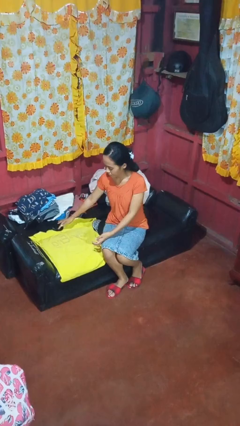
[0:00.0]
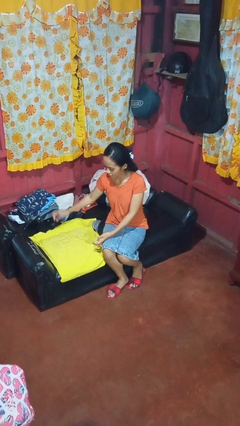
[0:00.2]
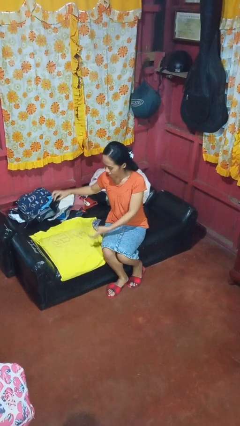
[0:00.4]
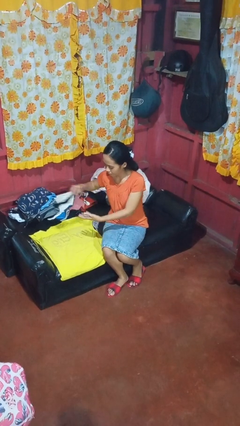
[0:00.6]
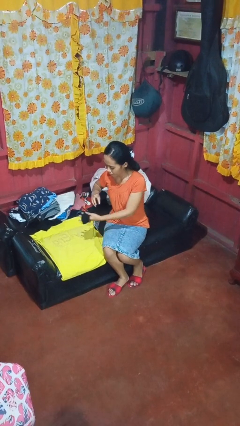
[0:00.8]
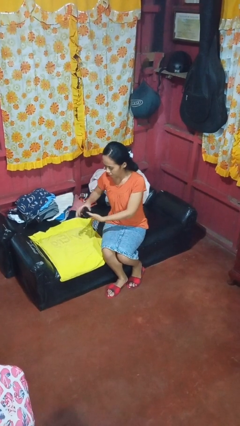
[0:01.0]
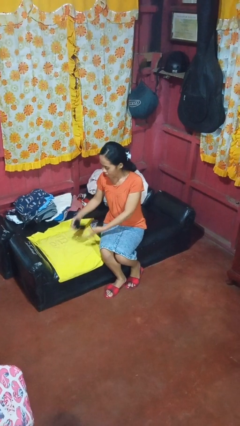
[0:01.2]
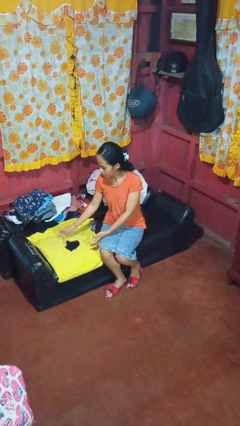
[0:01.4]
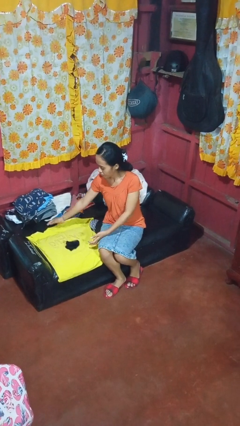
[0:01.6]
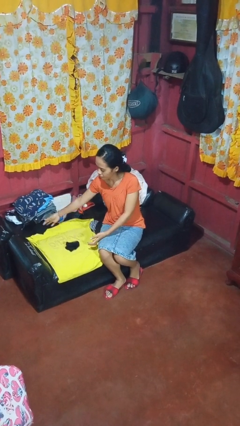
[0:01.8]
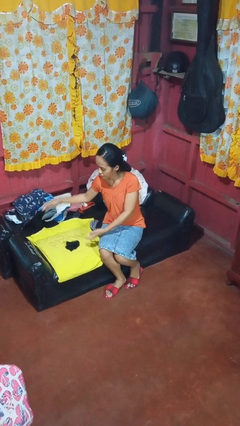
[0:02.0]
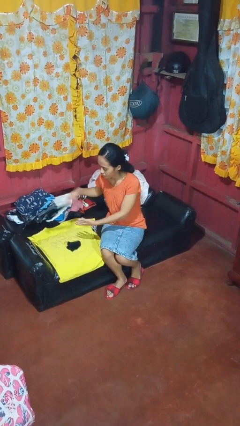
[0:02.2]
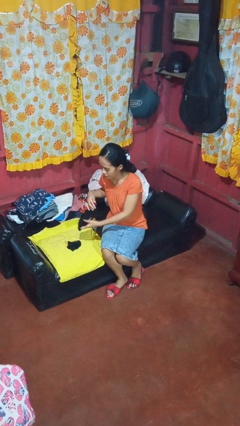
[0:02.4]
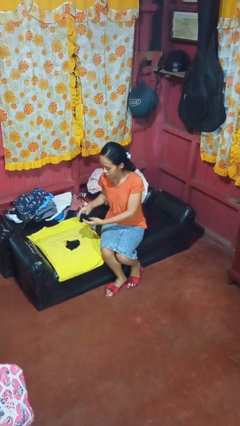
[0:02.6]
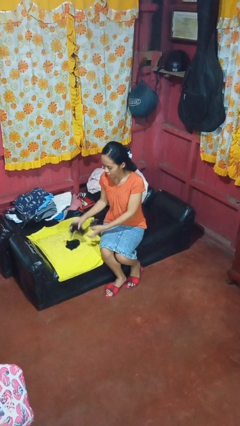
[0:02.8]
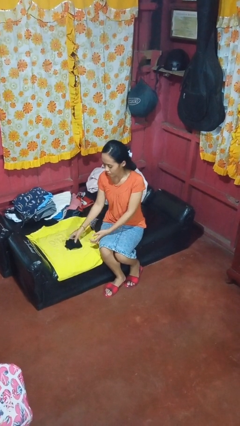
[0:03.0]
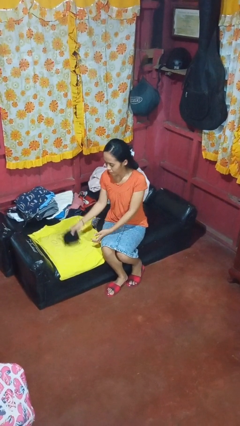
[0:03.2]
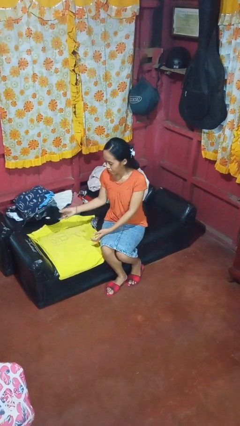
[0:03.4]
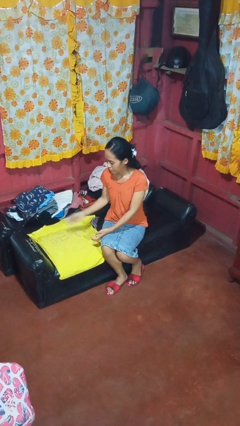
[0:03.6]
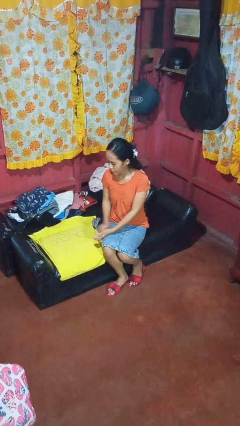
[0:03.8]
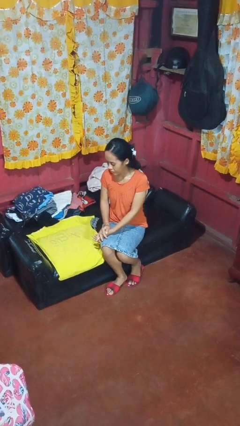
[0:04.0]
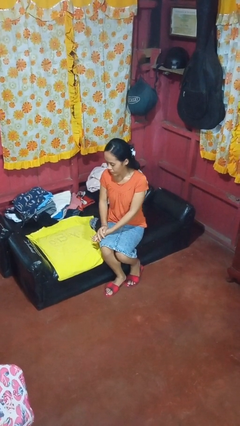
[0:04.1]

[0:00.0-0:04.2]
person folds socks

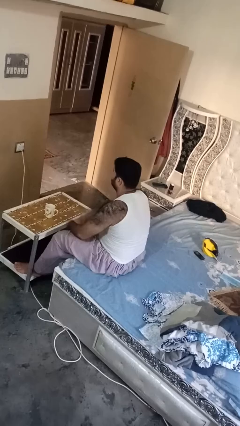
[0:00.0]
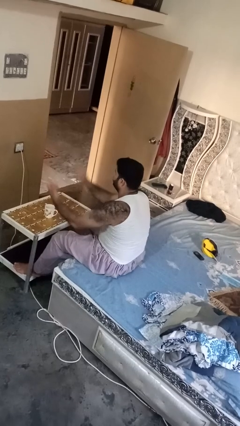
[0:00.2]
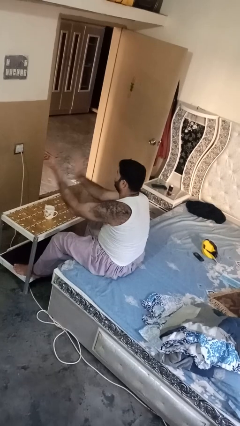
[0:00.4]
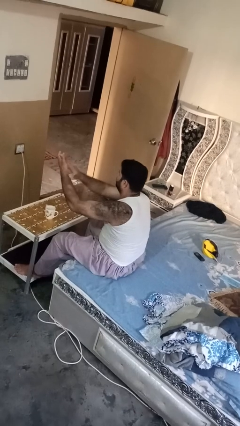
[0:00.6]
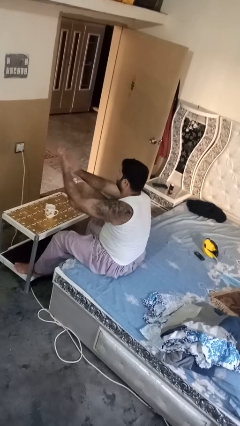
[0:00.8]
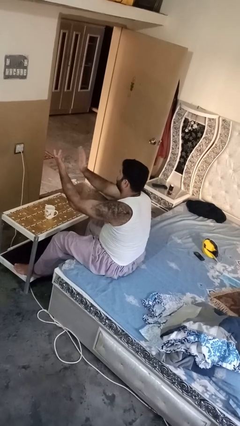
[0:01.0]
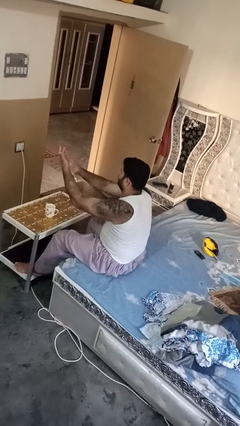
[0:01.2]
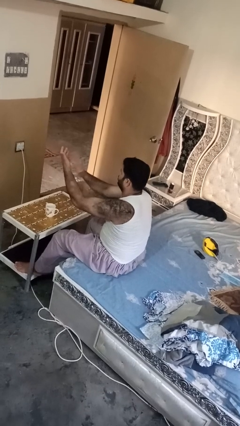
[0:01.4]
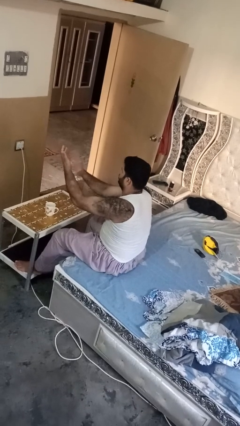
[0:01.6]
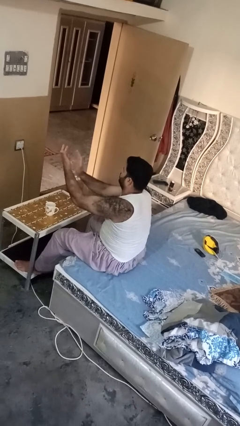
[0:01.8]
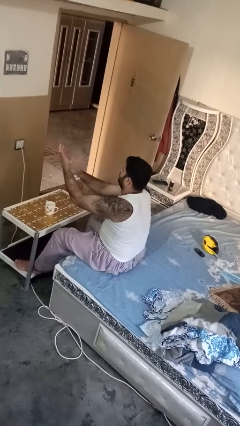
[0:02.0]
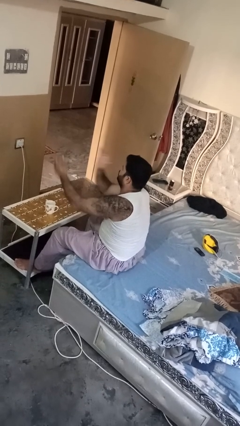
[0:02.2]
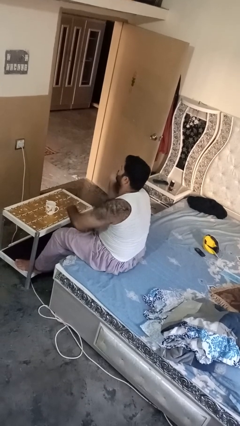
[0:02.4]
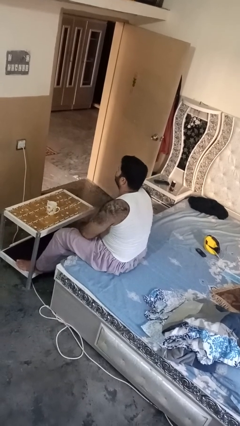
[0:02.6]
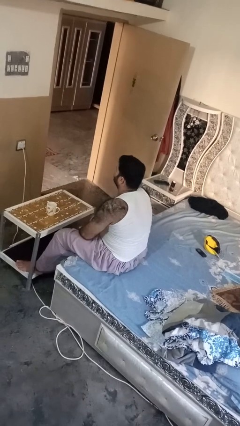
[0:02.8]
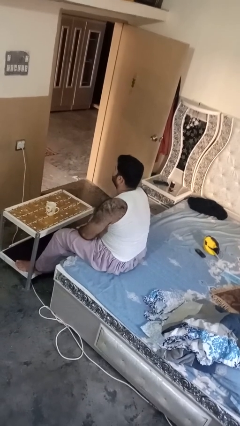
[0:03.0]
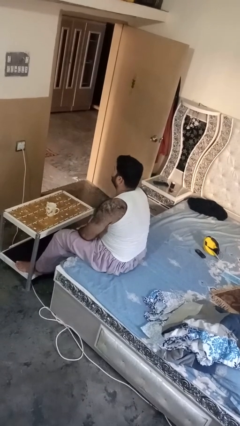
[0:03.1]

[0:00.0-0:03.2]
person claps hands

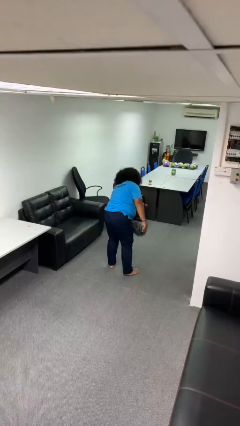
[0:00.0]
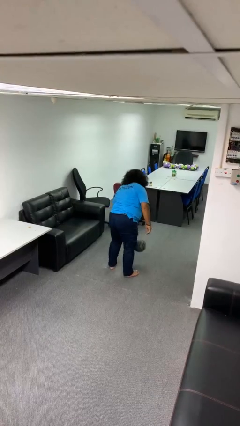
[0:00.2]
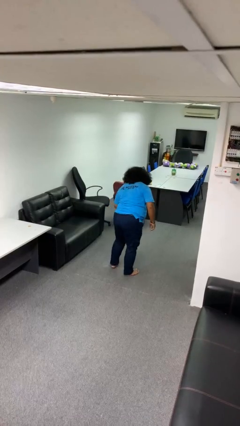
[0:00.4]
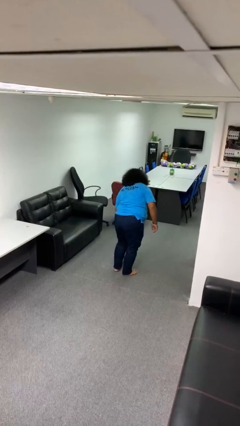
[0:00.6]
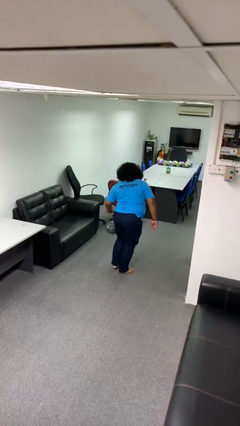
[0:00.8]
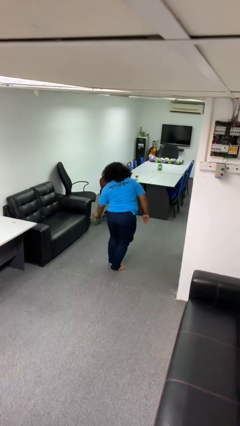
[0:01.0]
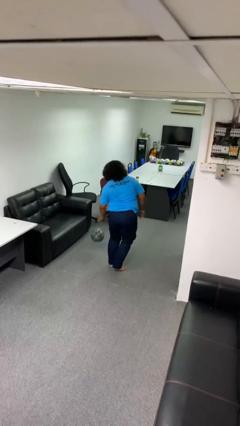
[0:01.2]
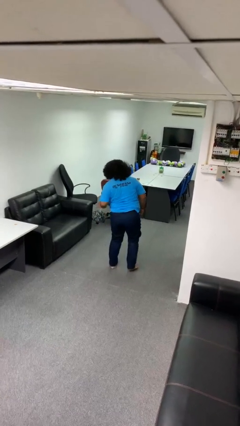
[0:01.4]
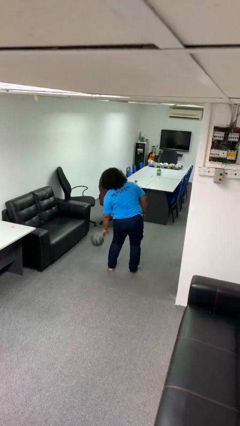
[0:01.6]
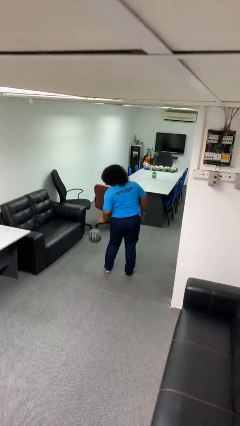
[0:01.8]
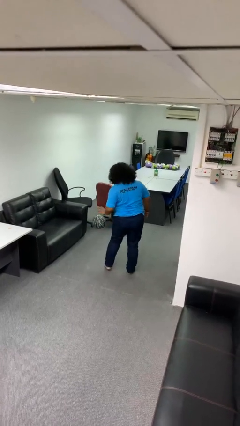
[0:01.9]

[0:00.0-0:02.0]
person bounces ball on floor

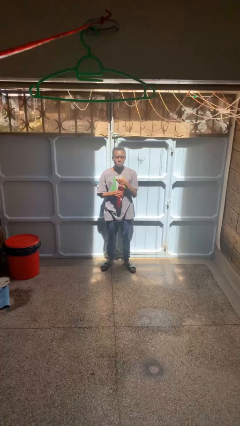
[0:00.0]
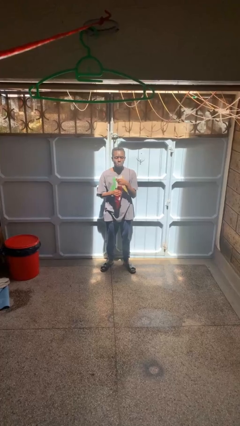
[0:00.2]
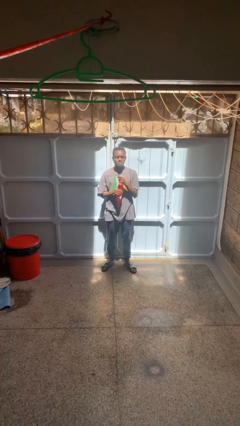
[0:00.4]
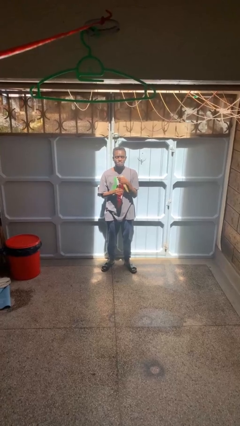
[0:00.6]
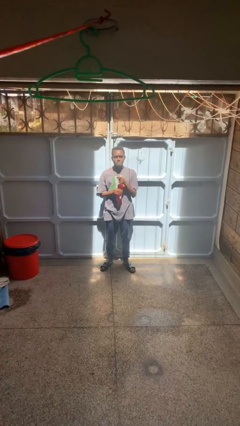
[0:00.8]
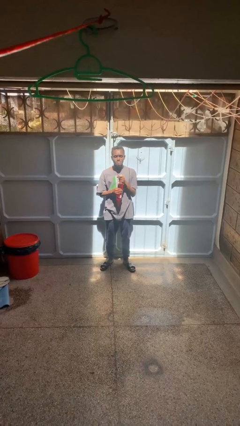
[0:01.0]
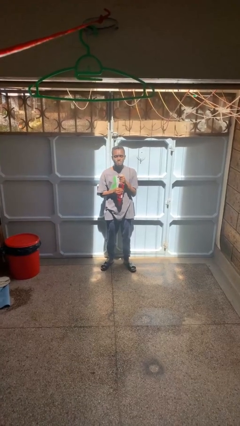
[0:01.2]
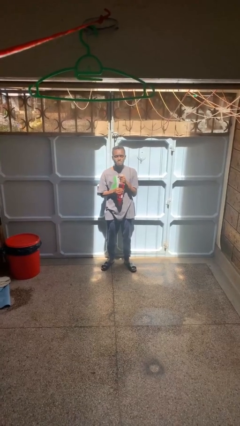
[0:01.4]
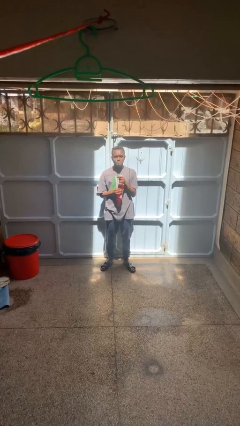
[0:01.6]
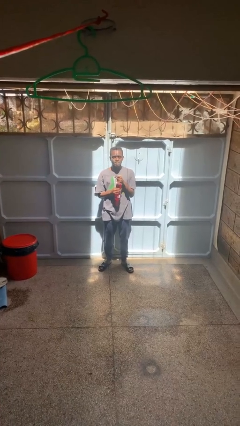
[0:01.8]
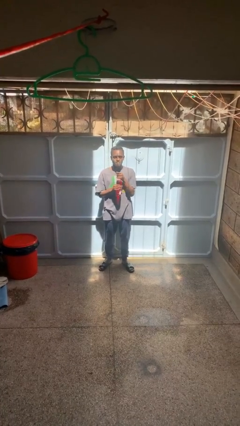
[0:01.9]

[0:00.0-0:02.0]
person opens beverage can

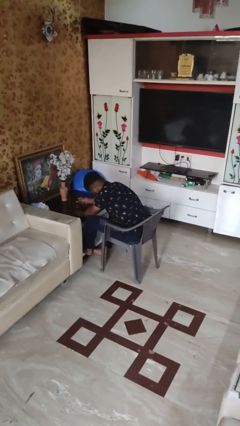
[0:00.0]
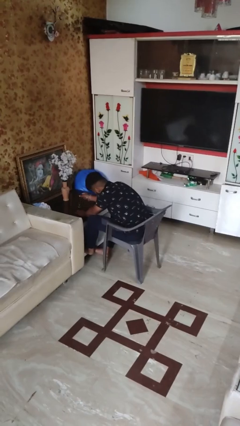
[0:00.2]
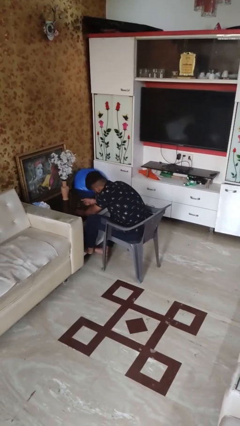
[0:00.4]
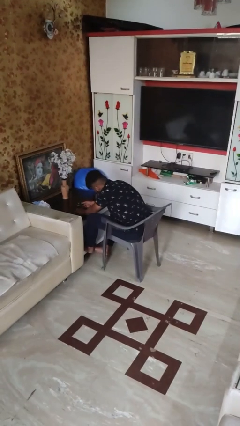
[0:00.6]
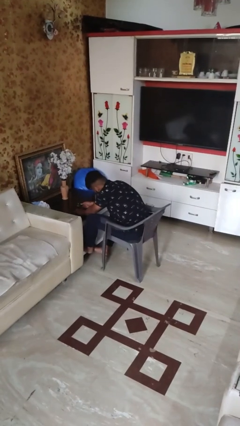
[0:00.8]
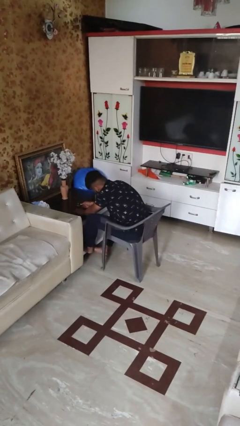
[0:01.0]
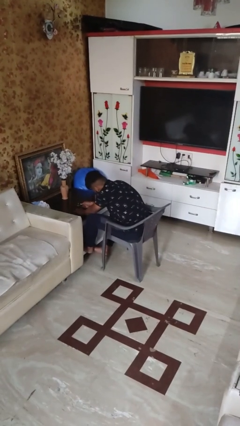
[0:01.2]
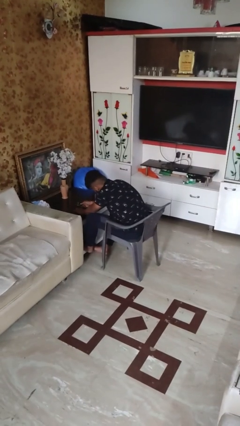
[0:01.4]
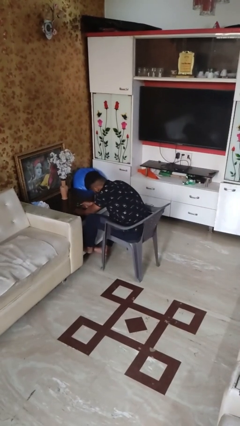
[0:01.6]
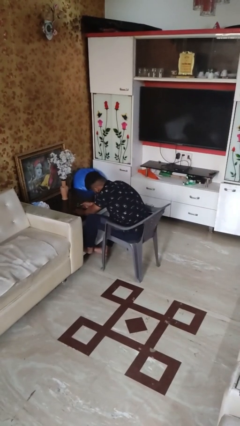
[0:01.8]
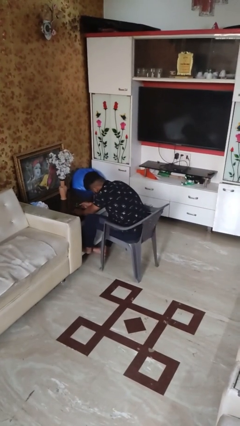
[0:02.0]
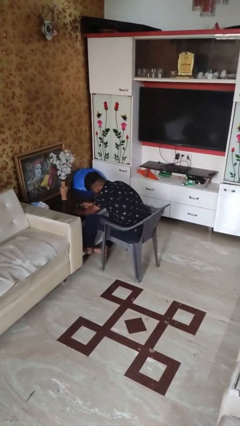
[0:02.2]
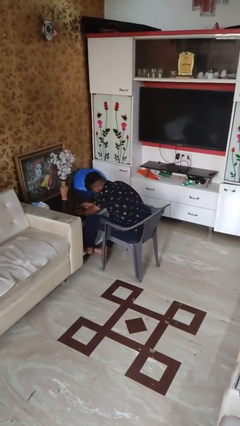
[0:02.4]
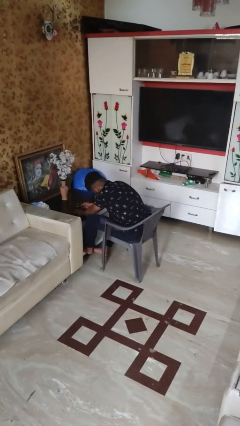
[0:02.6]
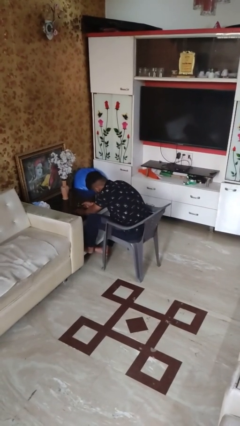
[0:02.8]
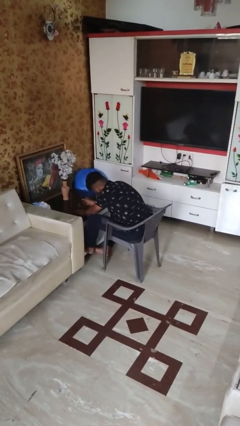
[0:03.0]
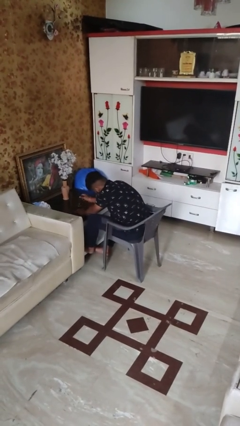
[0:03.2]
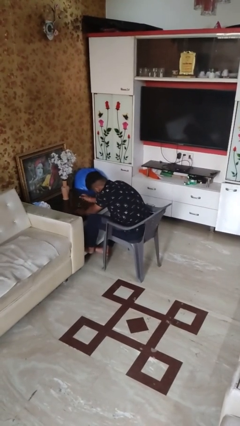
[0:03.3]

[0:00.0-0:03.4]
person paints fingernails

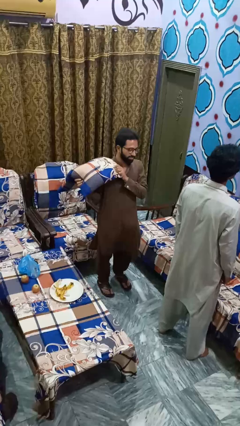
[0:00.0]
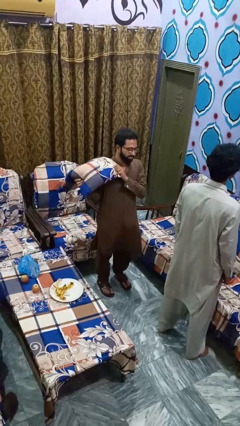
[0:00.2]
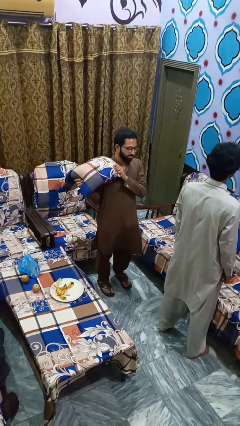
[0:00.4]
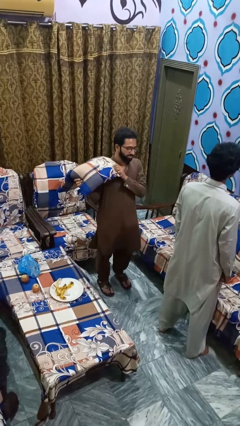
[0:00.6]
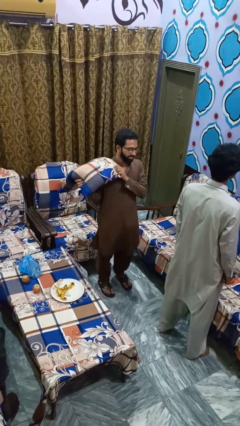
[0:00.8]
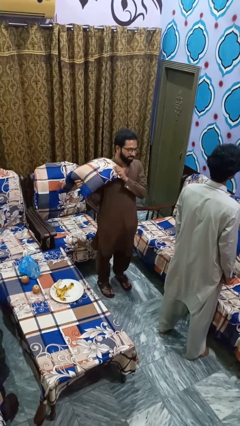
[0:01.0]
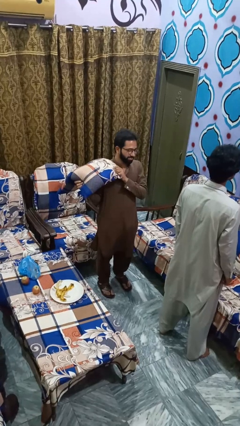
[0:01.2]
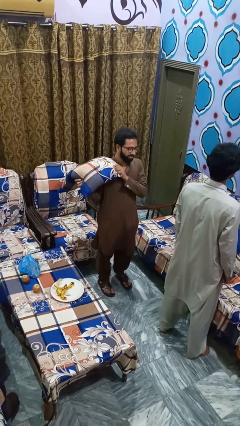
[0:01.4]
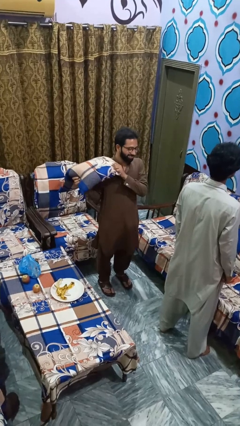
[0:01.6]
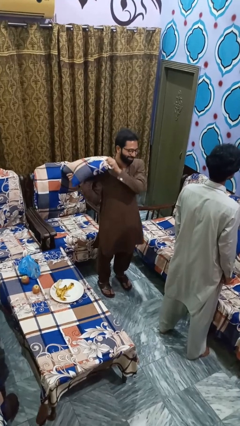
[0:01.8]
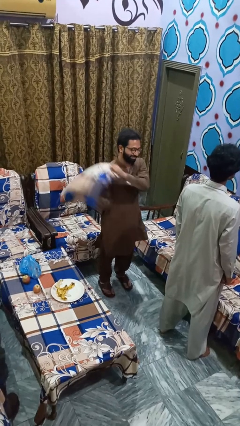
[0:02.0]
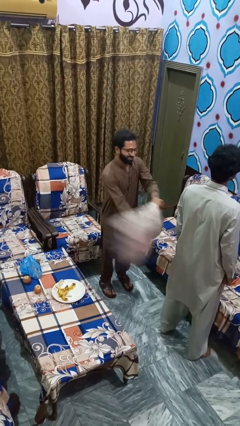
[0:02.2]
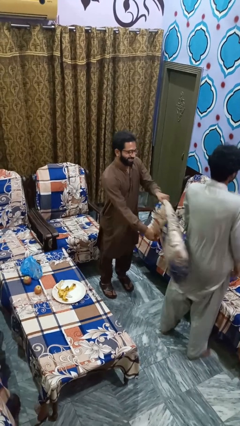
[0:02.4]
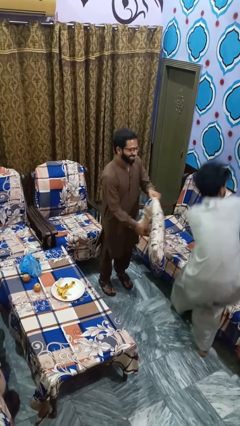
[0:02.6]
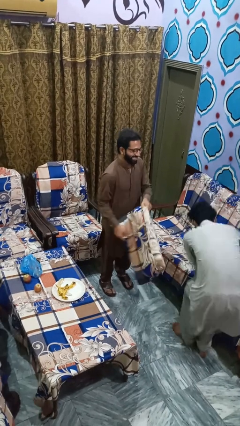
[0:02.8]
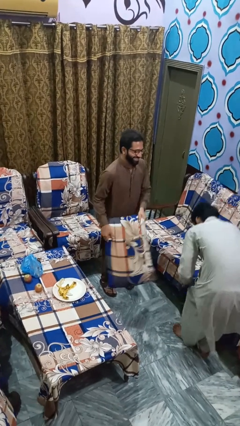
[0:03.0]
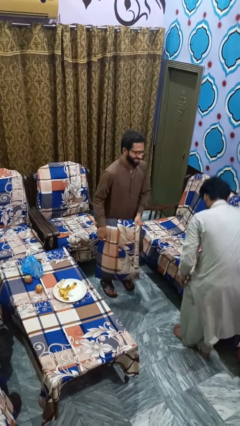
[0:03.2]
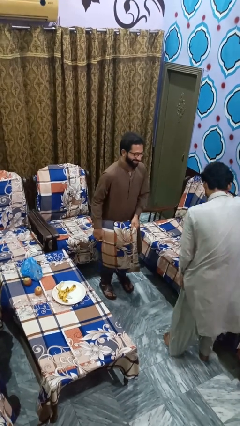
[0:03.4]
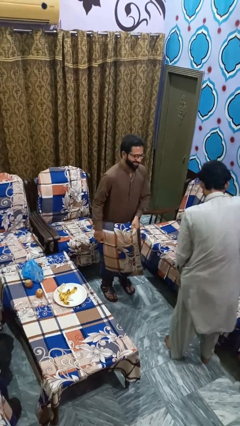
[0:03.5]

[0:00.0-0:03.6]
person hits person with pillow
